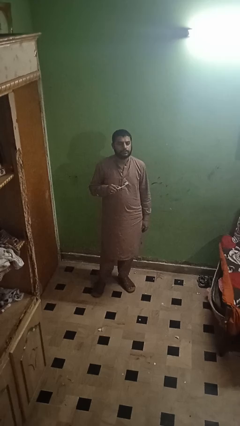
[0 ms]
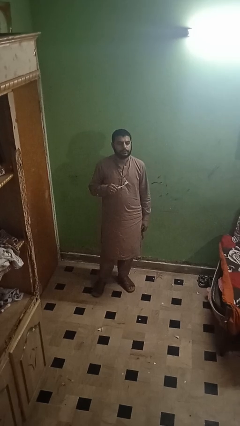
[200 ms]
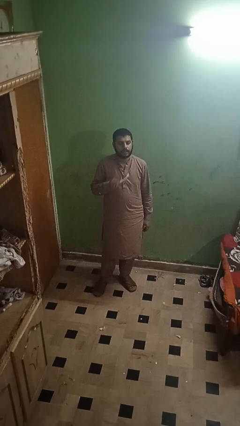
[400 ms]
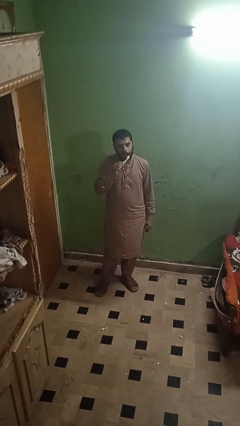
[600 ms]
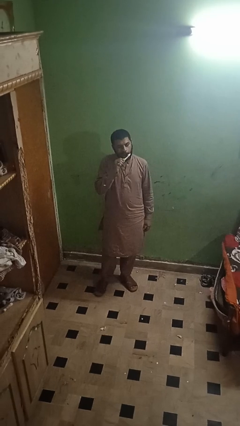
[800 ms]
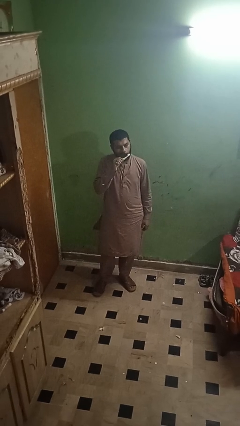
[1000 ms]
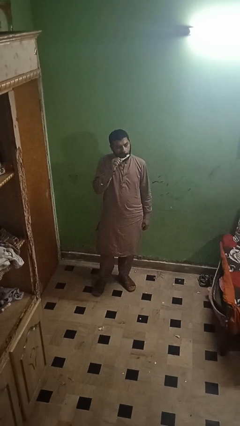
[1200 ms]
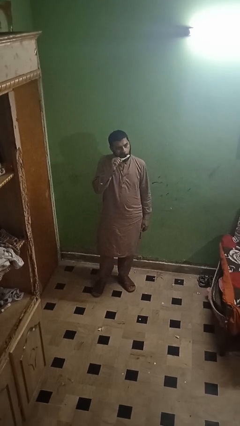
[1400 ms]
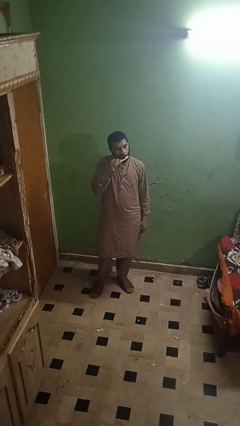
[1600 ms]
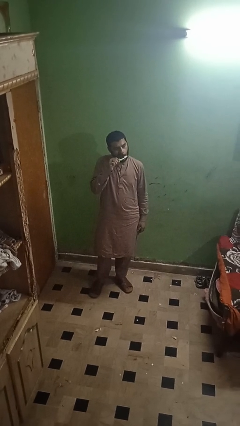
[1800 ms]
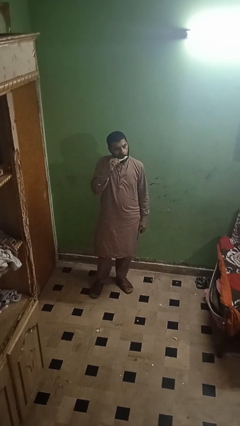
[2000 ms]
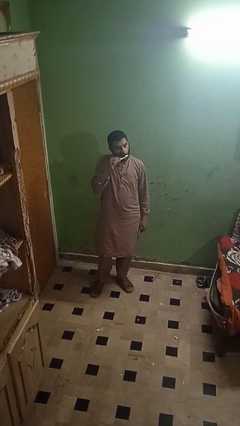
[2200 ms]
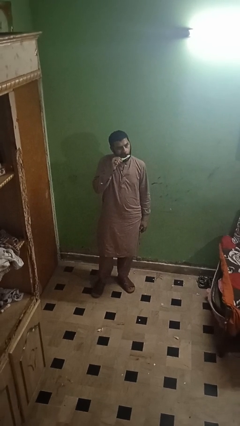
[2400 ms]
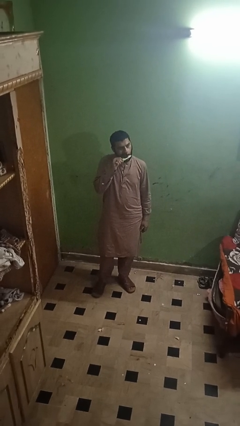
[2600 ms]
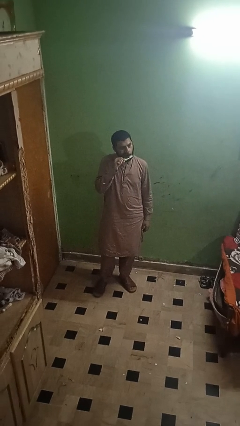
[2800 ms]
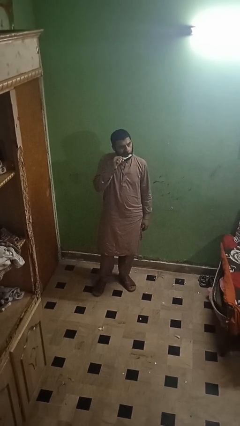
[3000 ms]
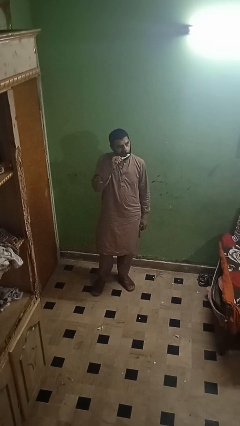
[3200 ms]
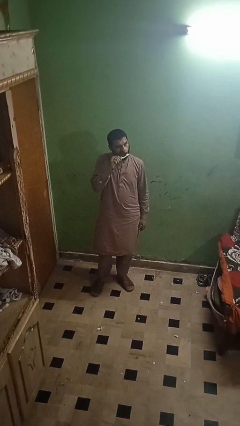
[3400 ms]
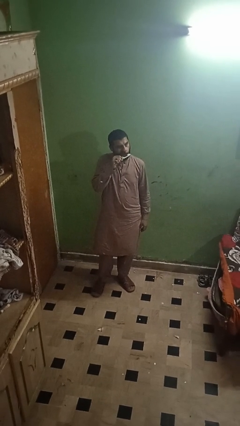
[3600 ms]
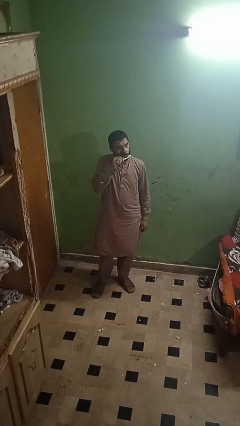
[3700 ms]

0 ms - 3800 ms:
person brushes teeth

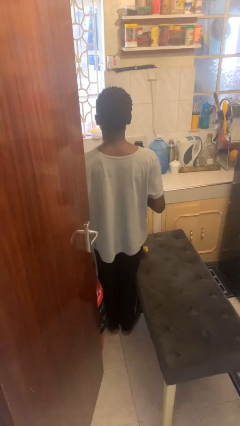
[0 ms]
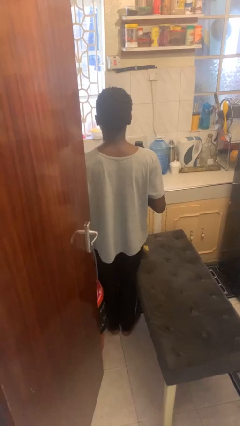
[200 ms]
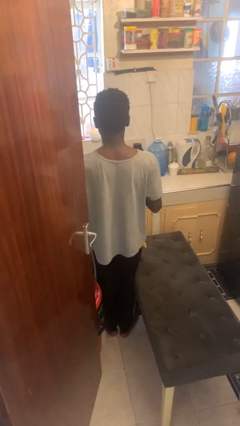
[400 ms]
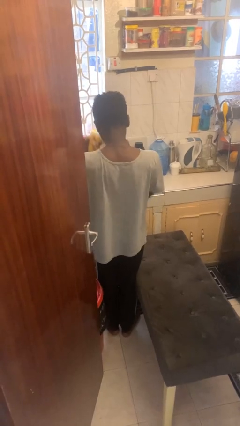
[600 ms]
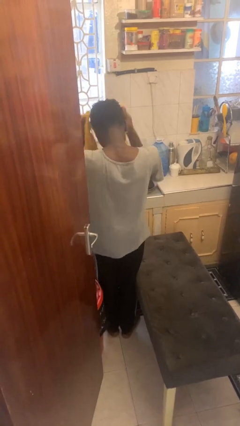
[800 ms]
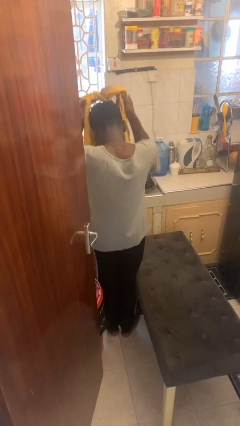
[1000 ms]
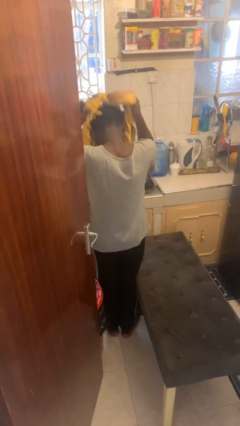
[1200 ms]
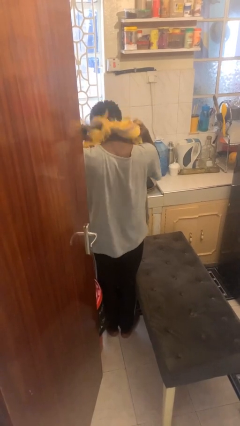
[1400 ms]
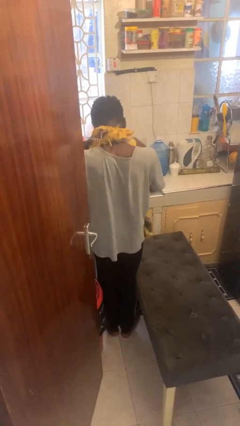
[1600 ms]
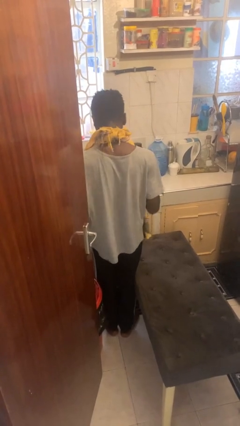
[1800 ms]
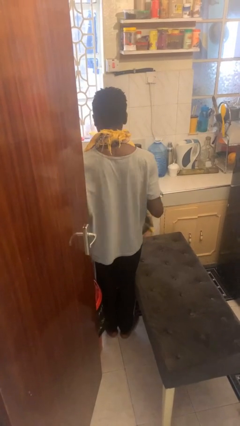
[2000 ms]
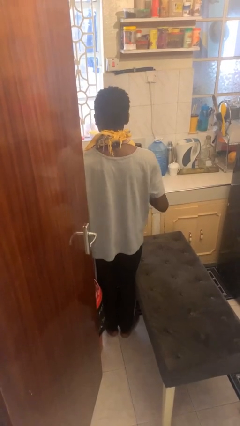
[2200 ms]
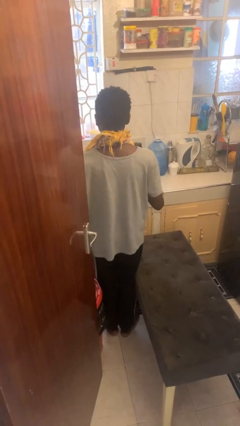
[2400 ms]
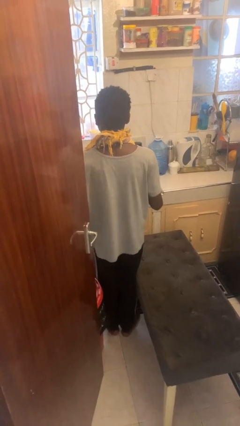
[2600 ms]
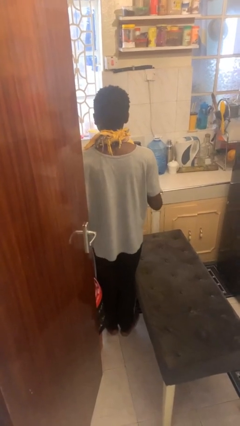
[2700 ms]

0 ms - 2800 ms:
person puts on apron

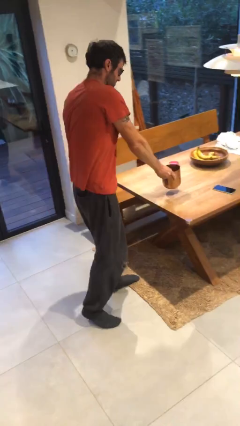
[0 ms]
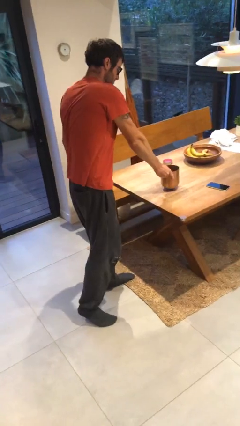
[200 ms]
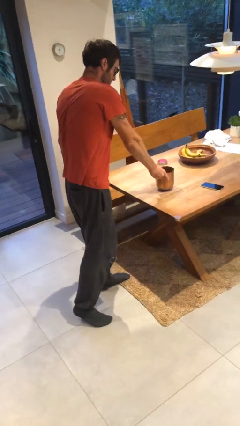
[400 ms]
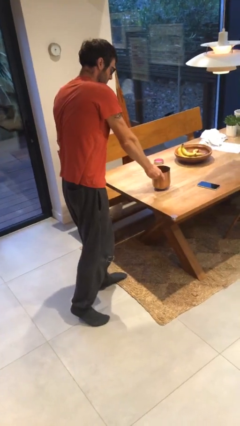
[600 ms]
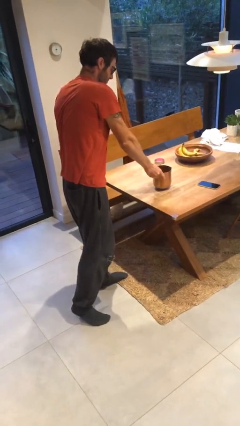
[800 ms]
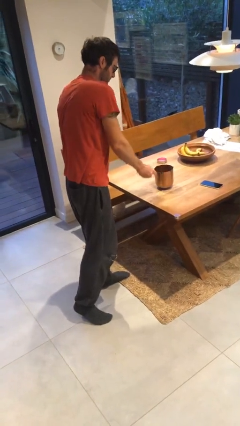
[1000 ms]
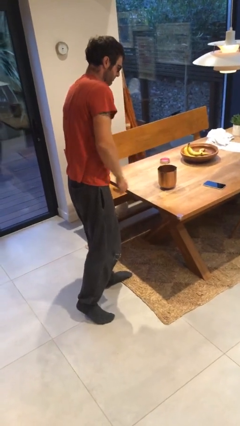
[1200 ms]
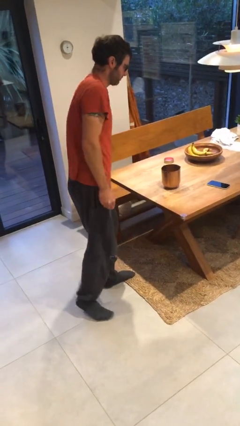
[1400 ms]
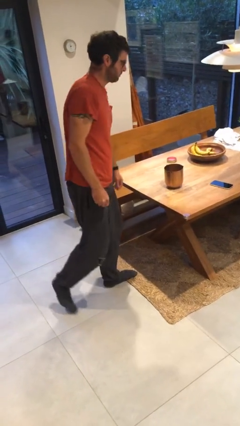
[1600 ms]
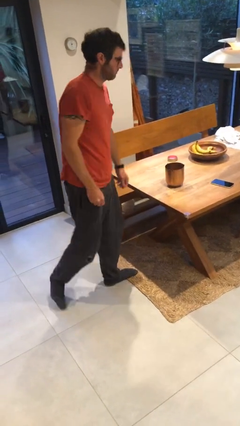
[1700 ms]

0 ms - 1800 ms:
person puts down object on table

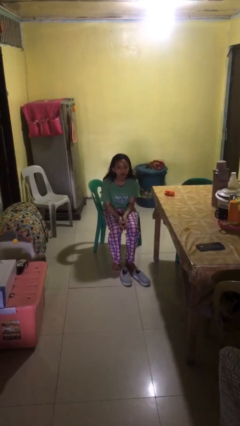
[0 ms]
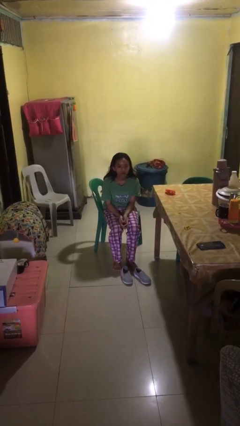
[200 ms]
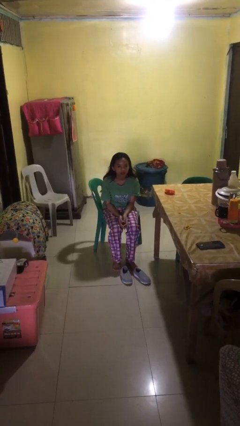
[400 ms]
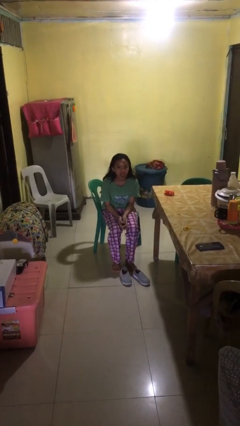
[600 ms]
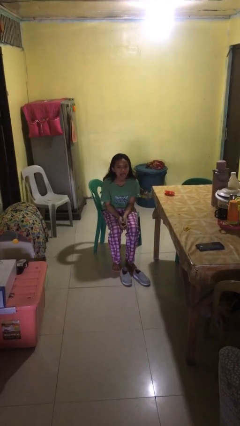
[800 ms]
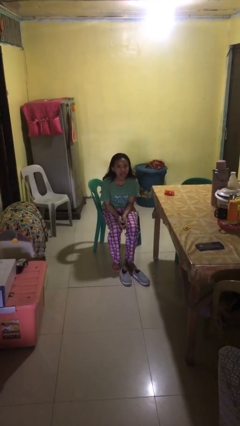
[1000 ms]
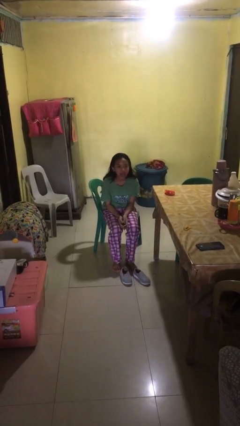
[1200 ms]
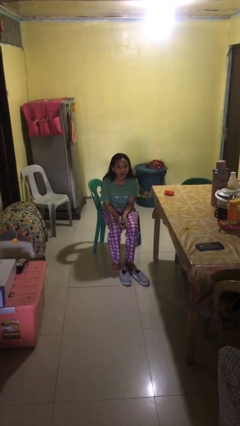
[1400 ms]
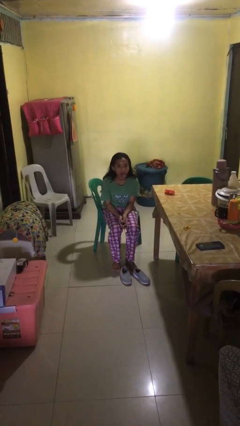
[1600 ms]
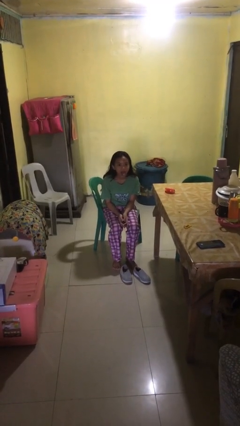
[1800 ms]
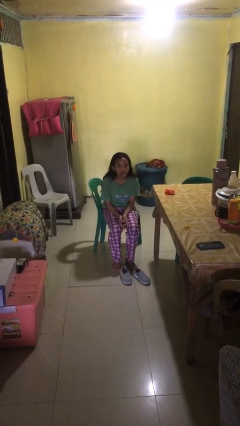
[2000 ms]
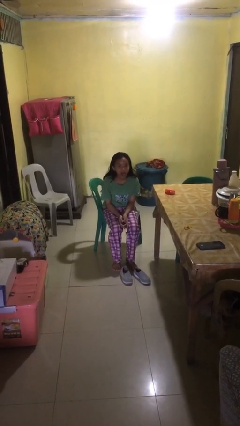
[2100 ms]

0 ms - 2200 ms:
person sticks out tongue

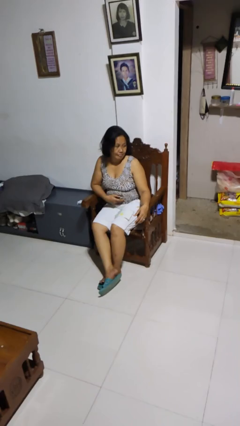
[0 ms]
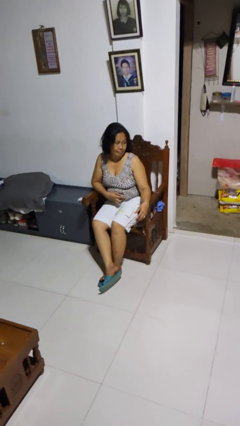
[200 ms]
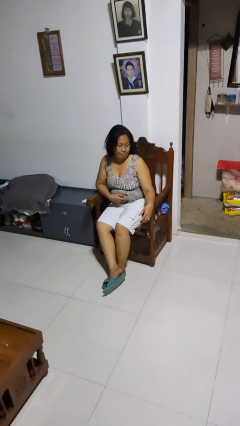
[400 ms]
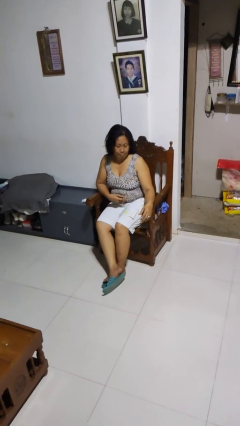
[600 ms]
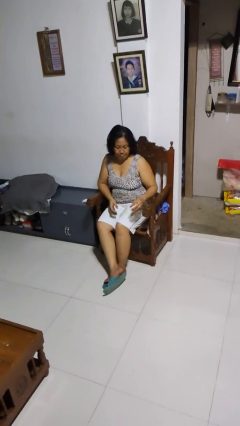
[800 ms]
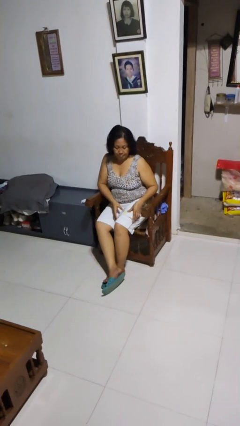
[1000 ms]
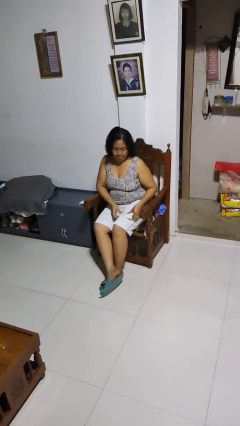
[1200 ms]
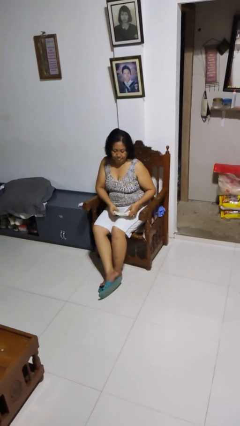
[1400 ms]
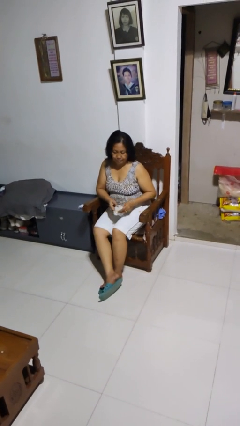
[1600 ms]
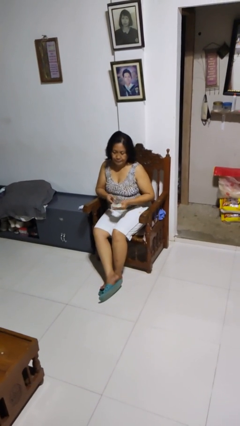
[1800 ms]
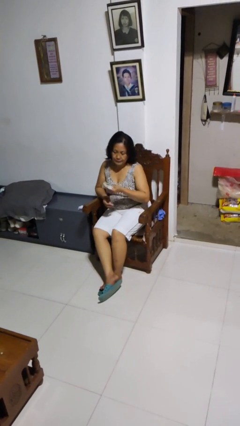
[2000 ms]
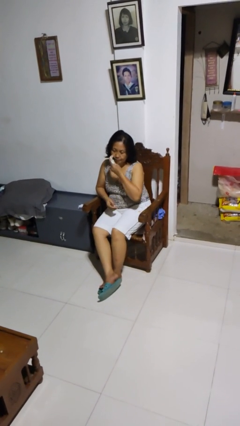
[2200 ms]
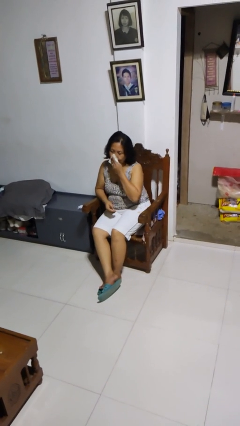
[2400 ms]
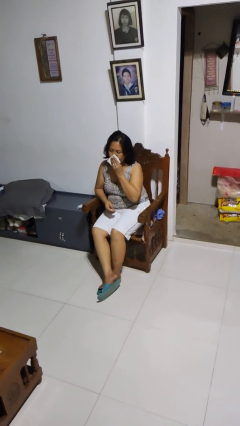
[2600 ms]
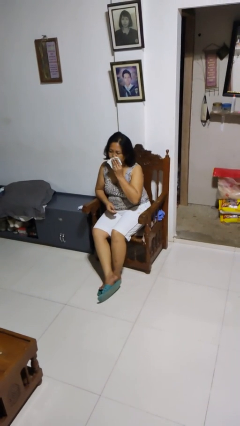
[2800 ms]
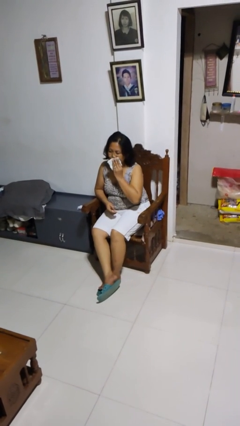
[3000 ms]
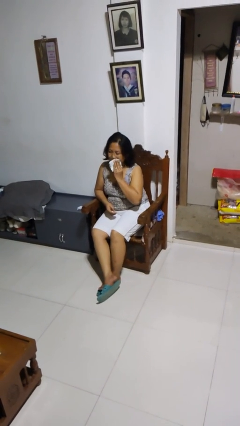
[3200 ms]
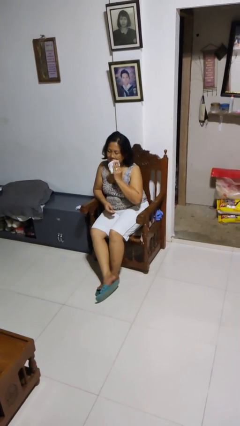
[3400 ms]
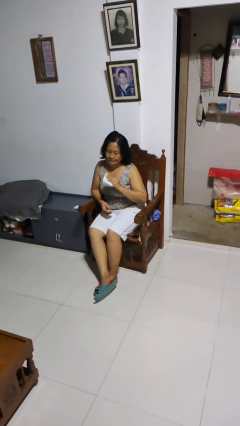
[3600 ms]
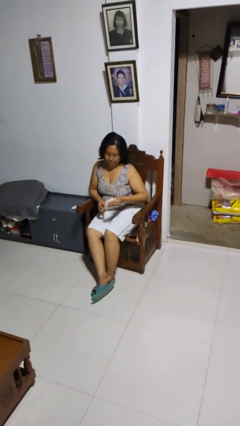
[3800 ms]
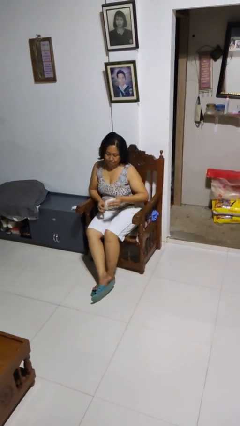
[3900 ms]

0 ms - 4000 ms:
person wipes mouth with napkin

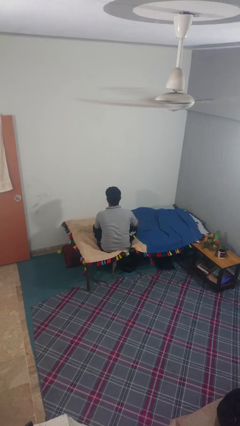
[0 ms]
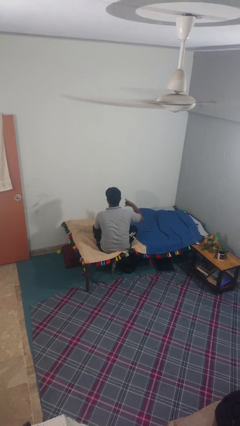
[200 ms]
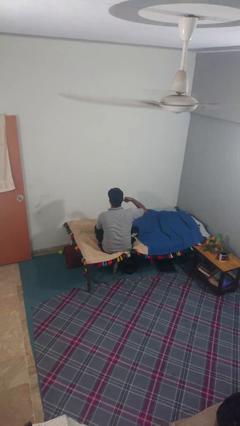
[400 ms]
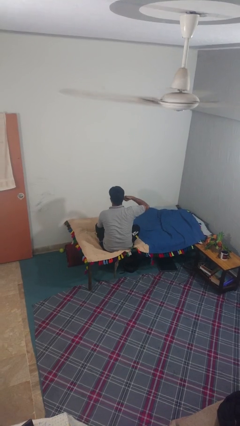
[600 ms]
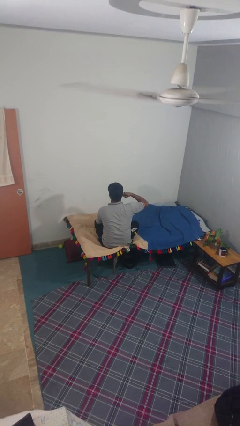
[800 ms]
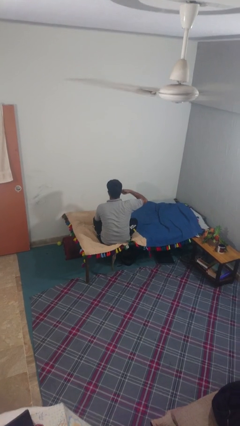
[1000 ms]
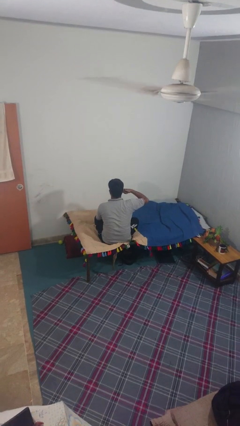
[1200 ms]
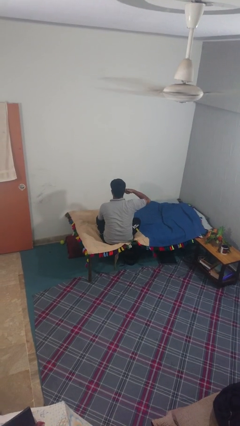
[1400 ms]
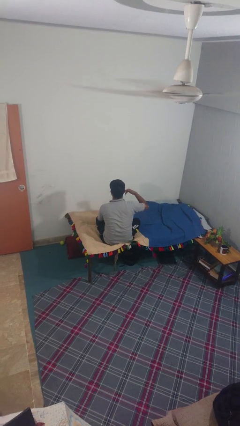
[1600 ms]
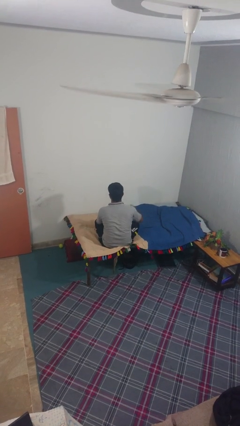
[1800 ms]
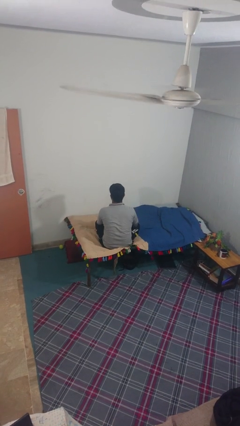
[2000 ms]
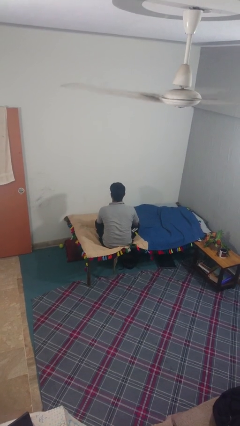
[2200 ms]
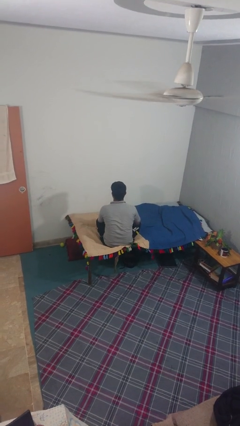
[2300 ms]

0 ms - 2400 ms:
person gestures call me

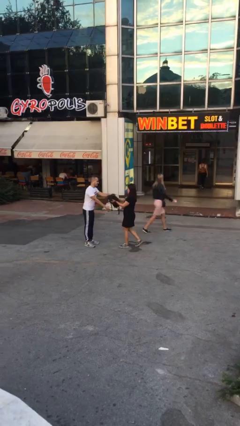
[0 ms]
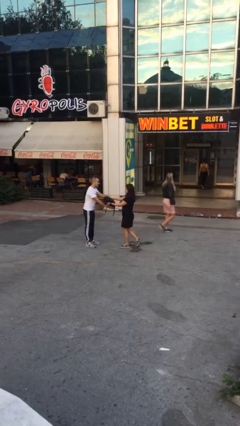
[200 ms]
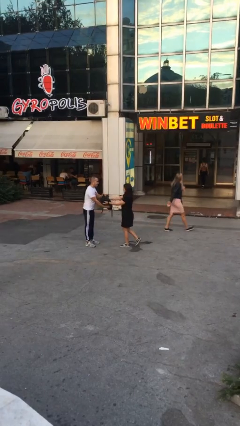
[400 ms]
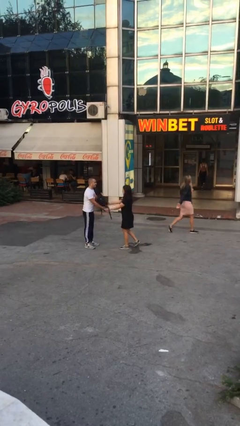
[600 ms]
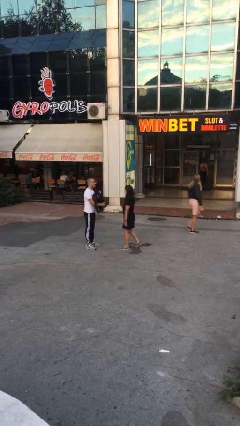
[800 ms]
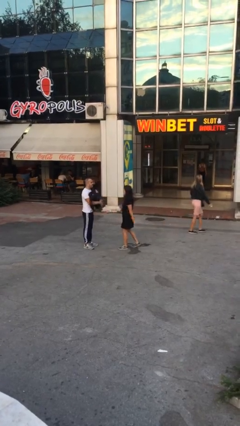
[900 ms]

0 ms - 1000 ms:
person transfers object to person
